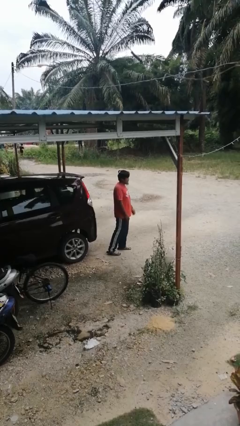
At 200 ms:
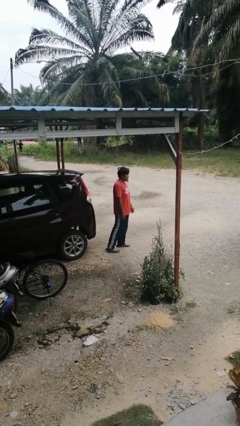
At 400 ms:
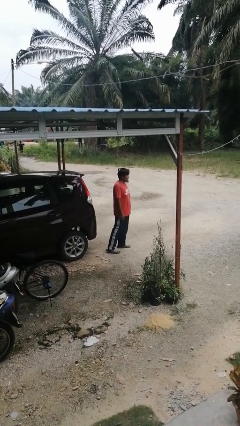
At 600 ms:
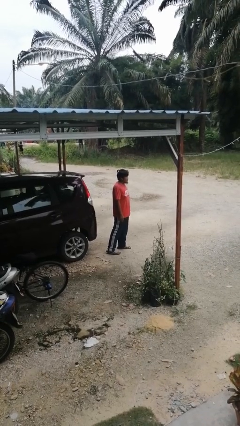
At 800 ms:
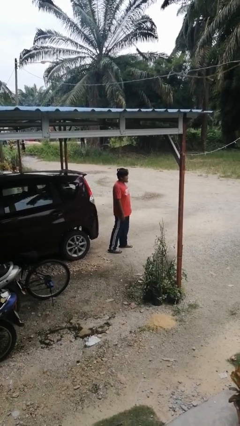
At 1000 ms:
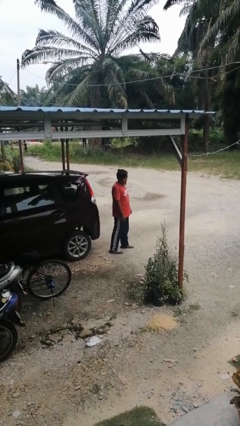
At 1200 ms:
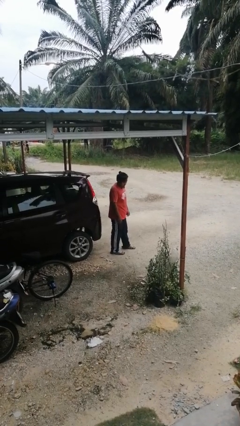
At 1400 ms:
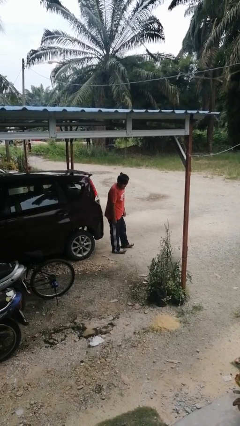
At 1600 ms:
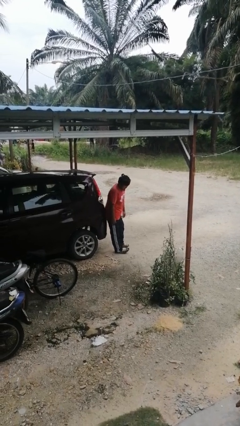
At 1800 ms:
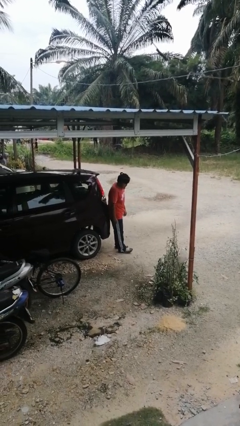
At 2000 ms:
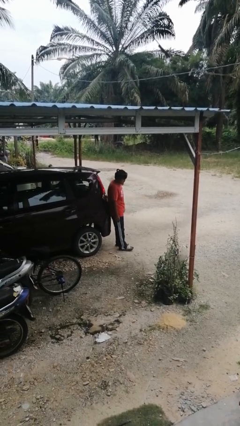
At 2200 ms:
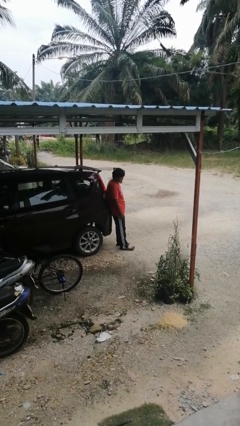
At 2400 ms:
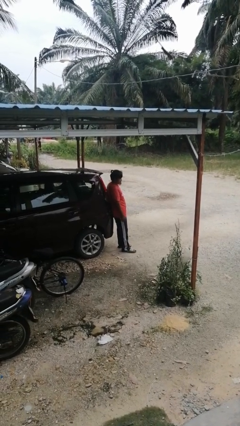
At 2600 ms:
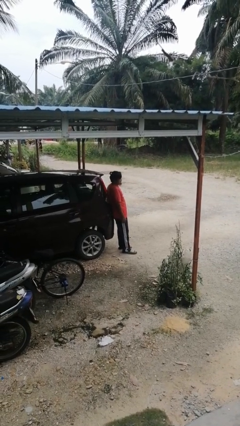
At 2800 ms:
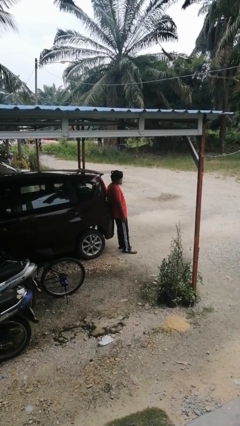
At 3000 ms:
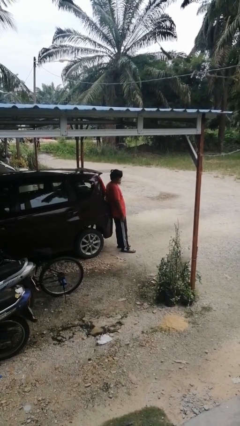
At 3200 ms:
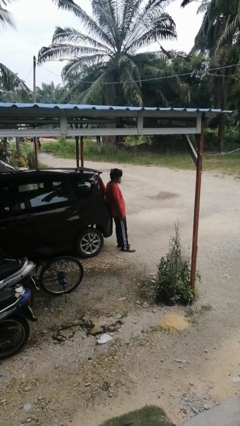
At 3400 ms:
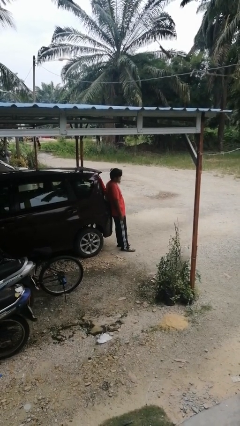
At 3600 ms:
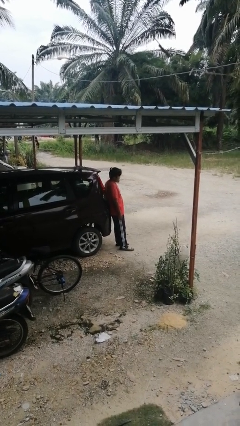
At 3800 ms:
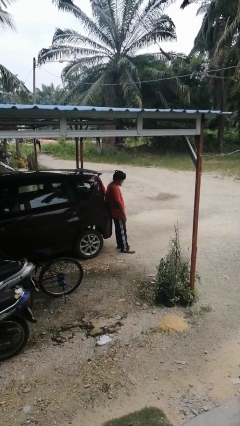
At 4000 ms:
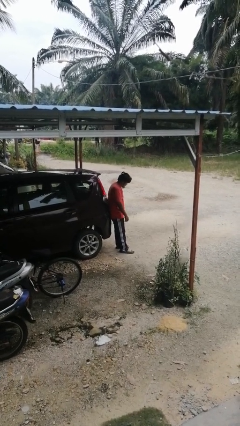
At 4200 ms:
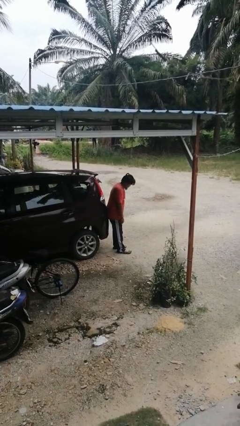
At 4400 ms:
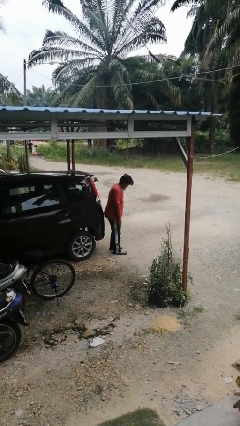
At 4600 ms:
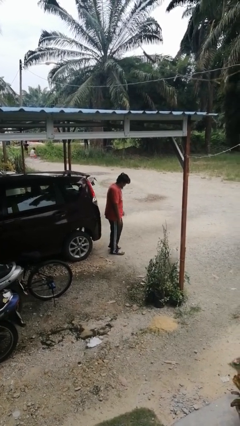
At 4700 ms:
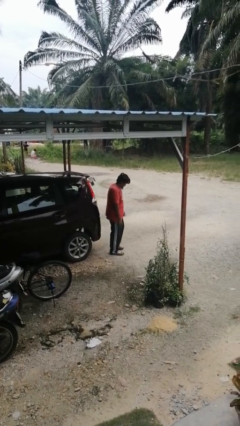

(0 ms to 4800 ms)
person leans against car

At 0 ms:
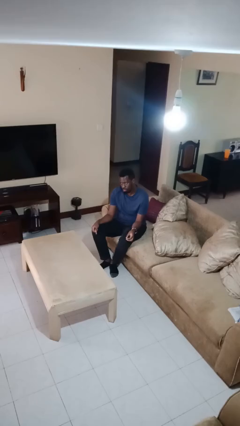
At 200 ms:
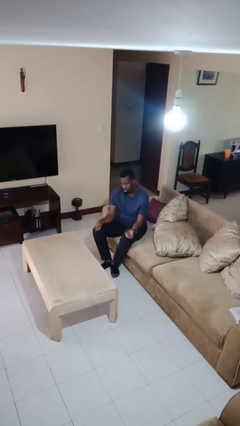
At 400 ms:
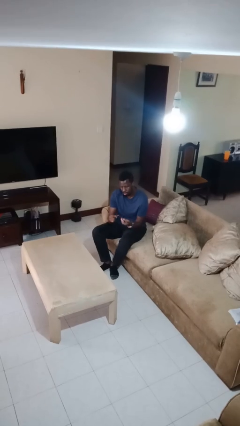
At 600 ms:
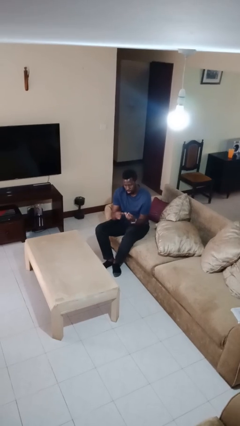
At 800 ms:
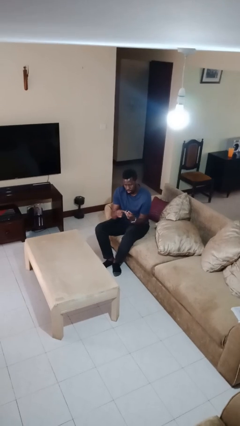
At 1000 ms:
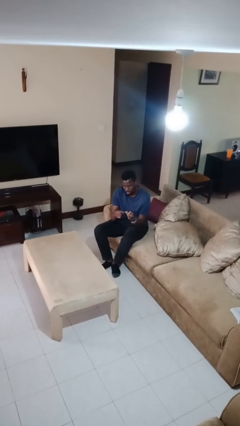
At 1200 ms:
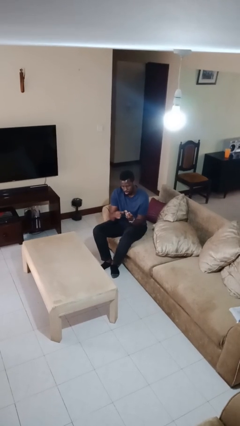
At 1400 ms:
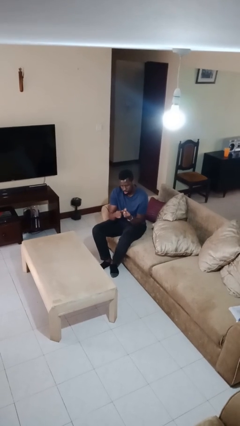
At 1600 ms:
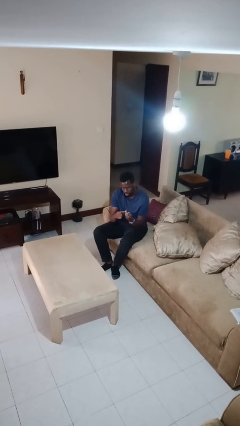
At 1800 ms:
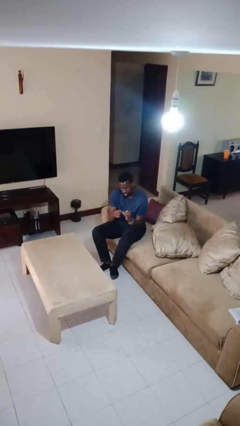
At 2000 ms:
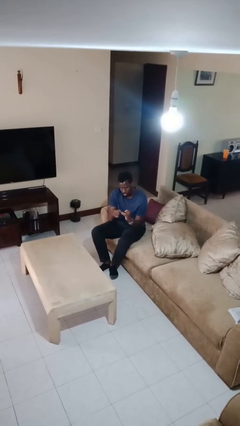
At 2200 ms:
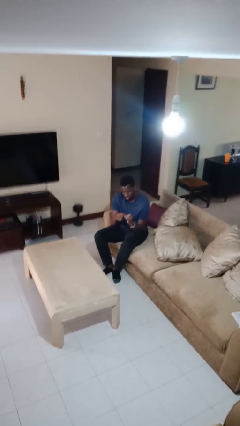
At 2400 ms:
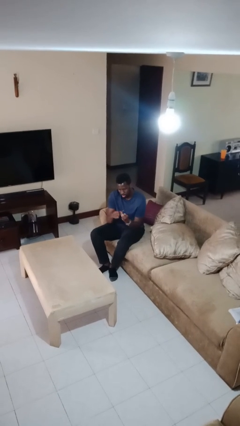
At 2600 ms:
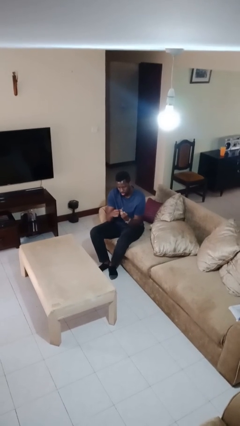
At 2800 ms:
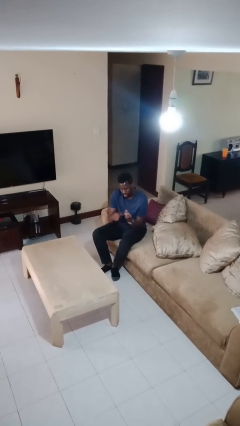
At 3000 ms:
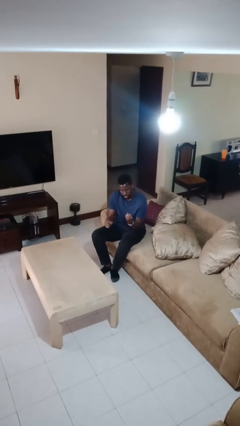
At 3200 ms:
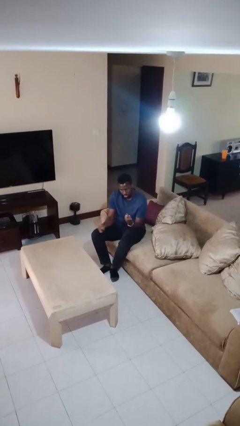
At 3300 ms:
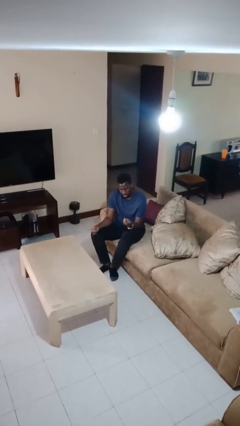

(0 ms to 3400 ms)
person files fingernails

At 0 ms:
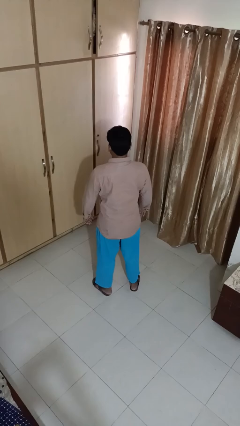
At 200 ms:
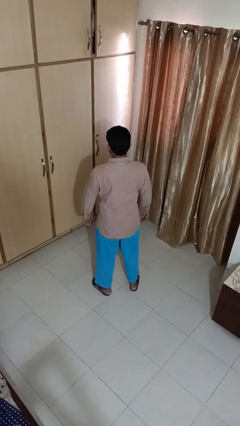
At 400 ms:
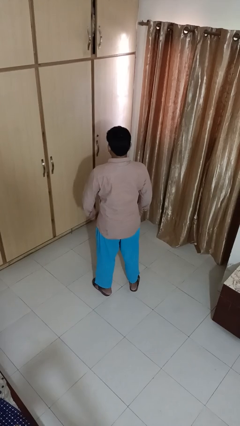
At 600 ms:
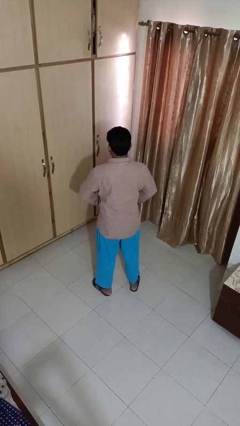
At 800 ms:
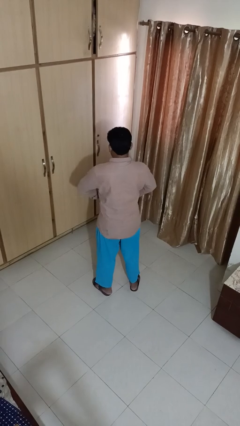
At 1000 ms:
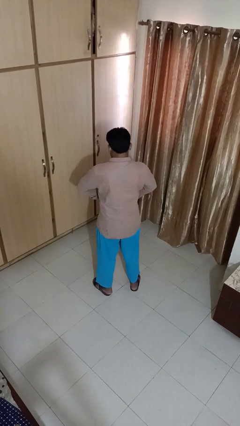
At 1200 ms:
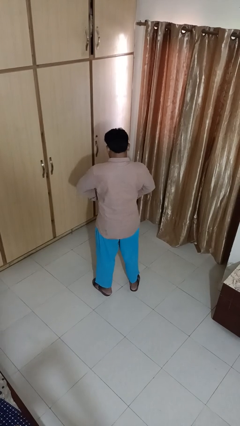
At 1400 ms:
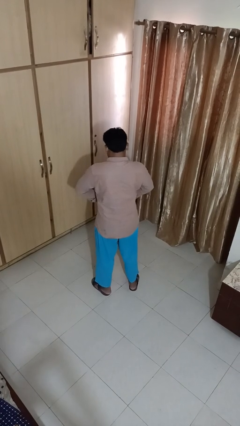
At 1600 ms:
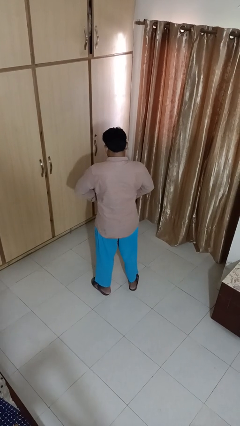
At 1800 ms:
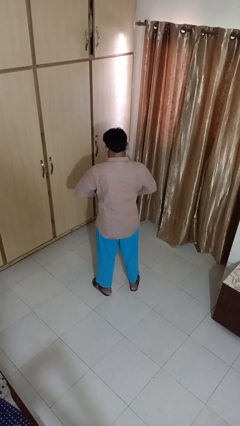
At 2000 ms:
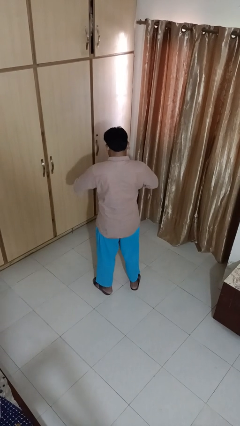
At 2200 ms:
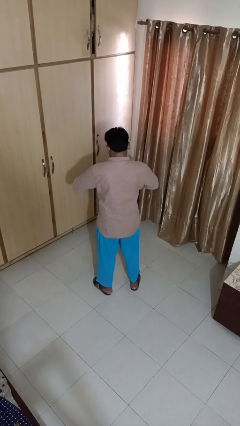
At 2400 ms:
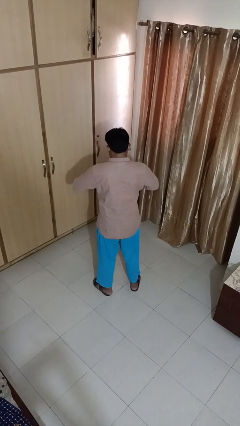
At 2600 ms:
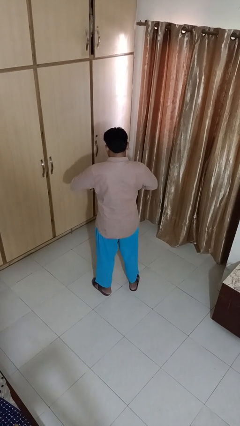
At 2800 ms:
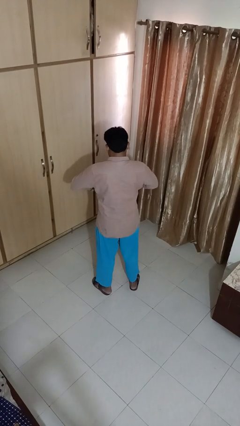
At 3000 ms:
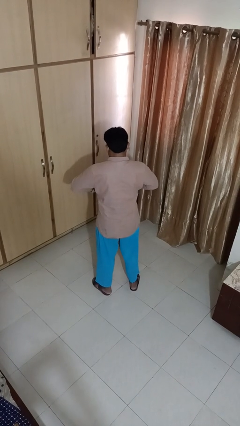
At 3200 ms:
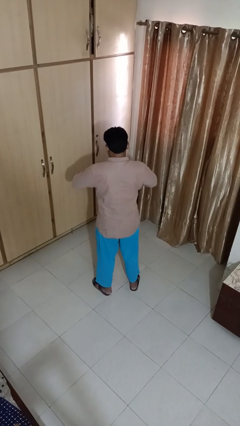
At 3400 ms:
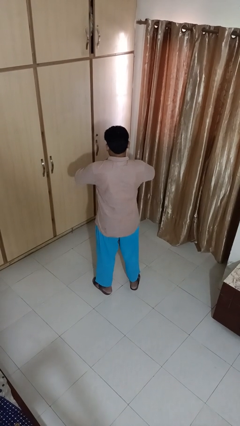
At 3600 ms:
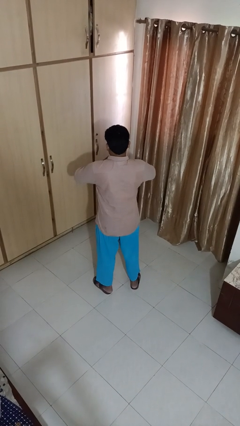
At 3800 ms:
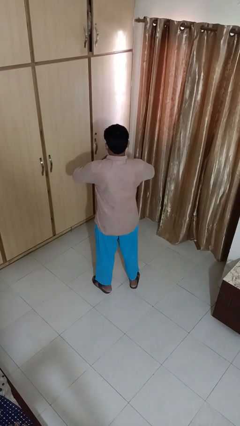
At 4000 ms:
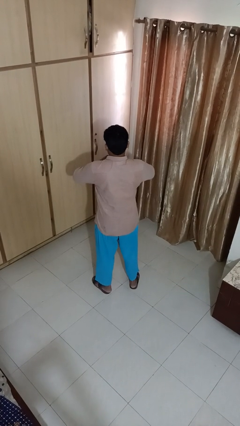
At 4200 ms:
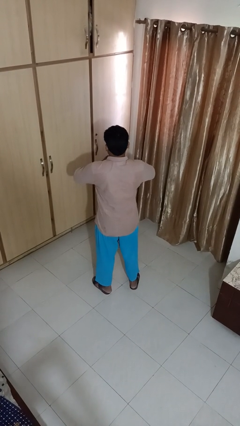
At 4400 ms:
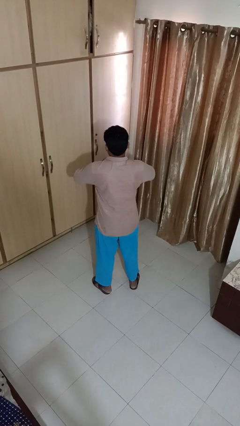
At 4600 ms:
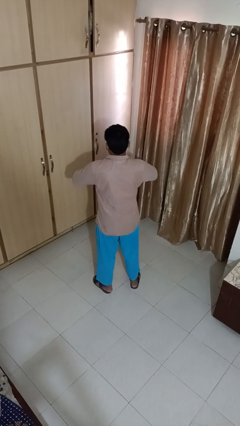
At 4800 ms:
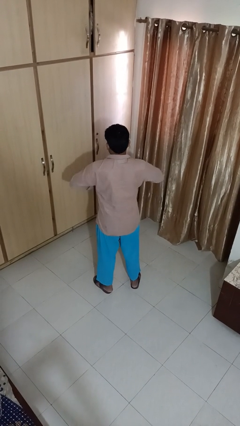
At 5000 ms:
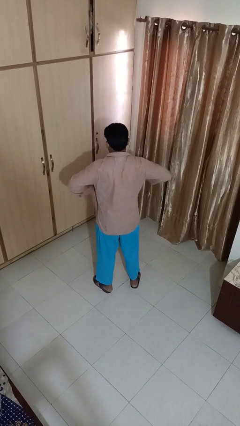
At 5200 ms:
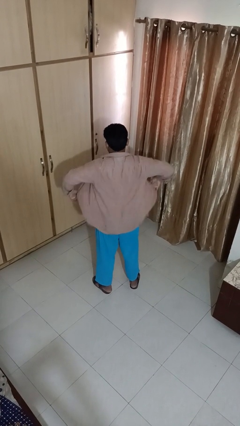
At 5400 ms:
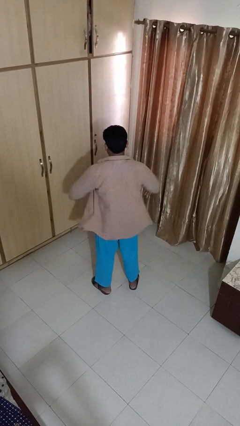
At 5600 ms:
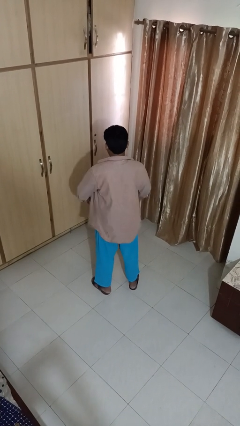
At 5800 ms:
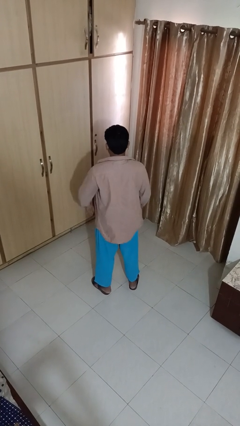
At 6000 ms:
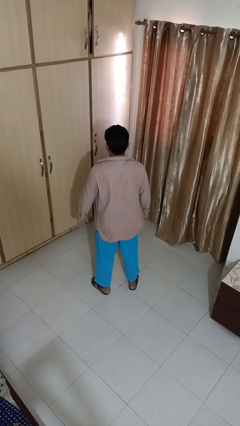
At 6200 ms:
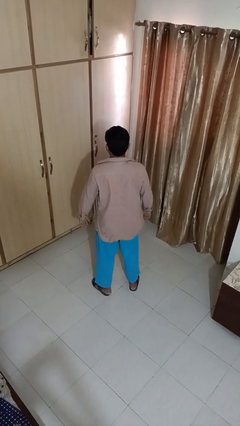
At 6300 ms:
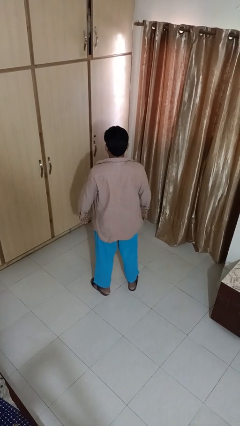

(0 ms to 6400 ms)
person unbuttons shirt

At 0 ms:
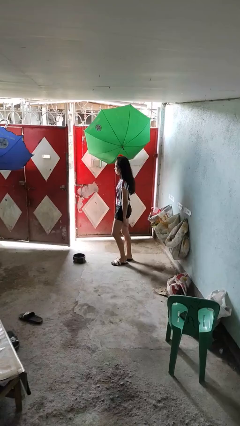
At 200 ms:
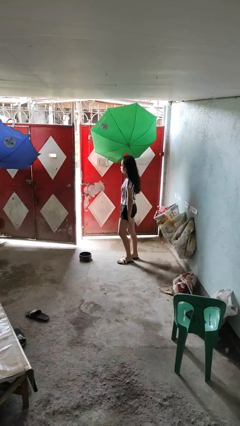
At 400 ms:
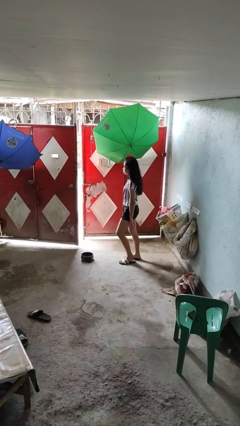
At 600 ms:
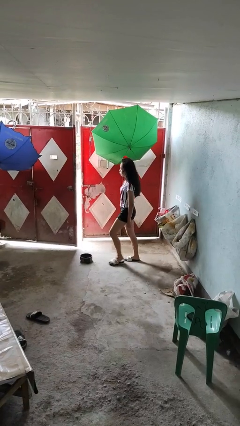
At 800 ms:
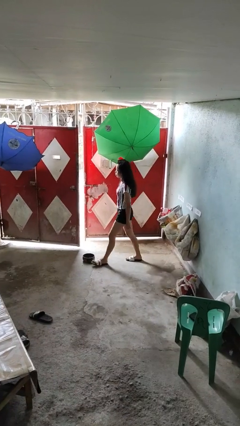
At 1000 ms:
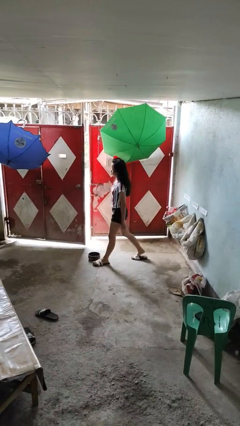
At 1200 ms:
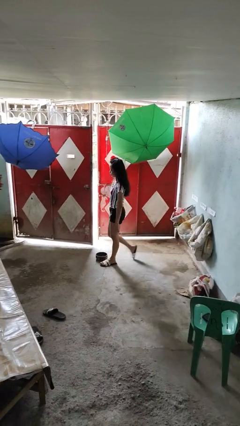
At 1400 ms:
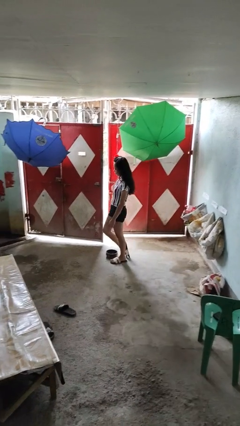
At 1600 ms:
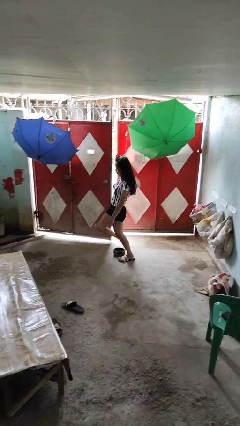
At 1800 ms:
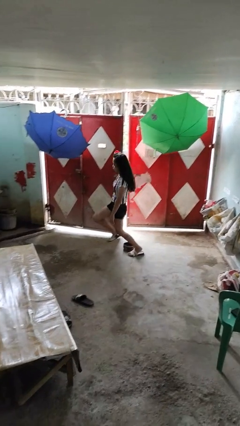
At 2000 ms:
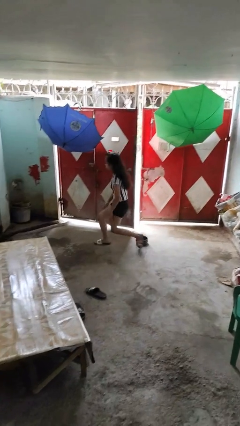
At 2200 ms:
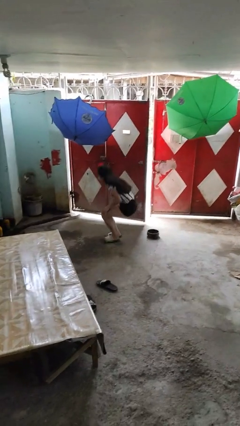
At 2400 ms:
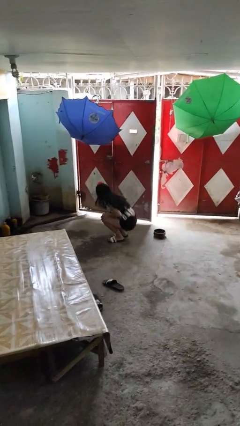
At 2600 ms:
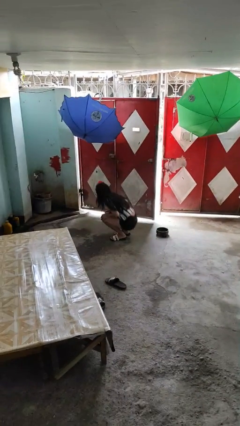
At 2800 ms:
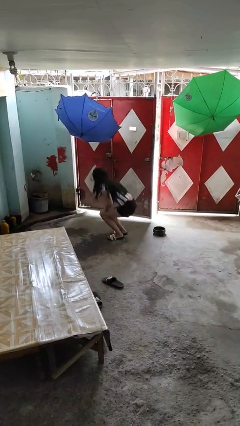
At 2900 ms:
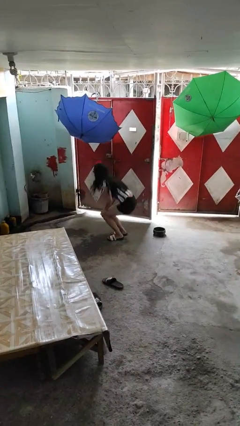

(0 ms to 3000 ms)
person trips on object on floor

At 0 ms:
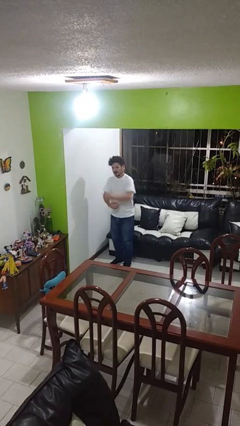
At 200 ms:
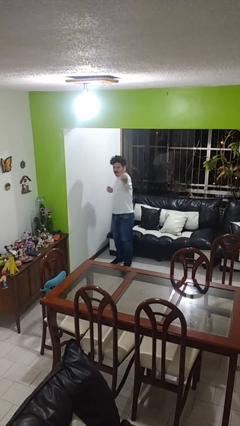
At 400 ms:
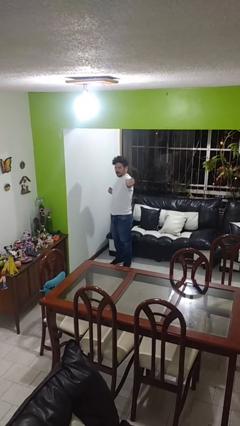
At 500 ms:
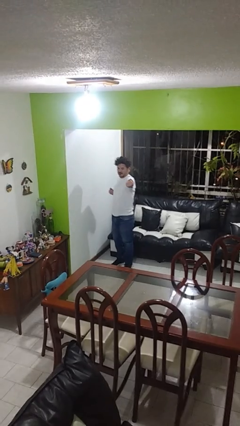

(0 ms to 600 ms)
person karate chop
